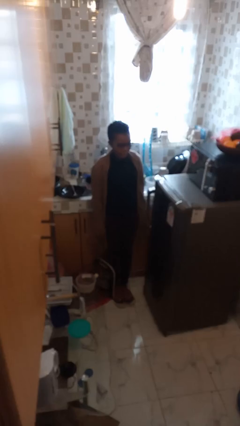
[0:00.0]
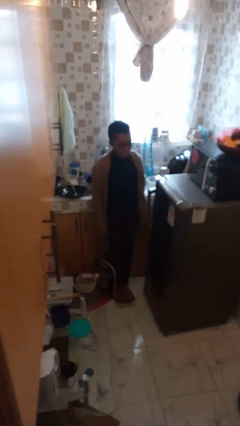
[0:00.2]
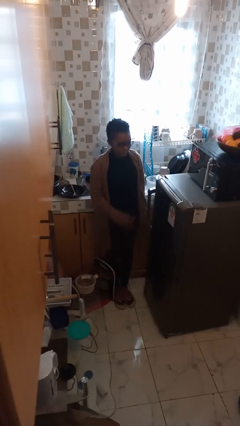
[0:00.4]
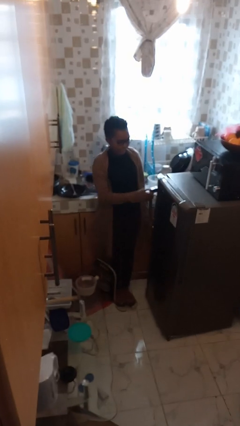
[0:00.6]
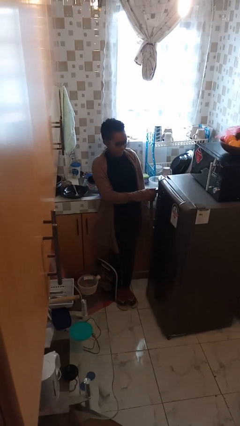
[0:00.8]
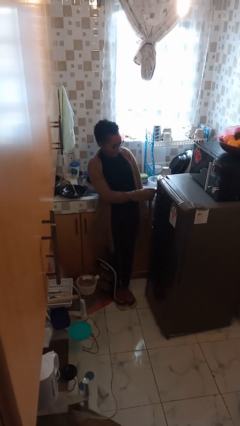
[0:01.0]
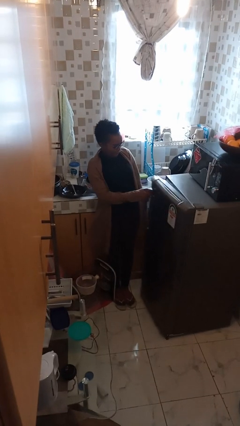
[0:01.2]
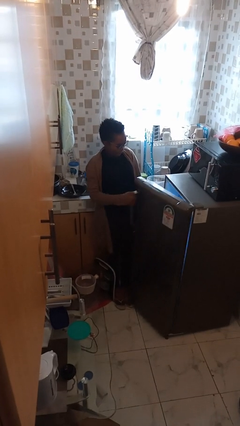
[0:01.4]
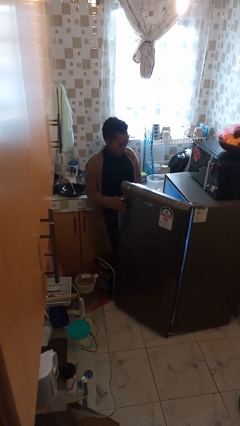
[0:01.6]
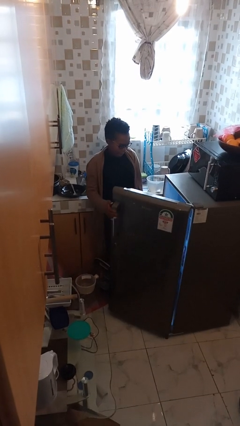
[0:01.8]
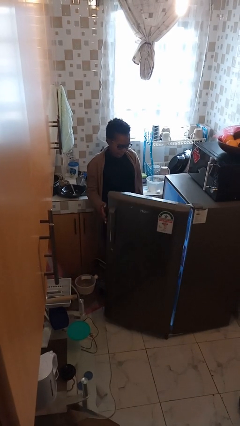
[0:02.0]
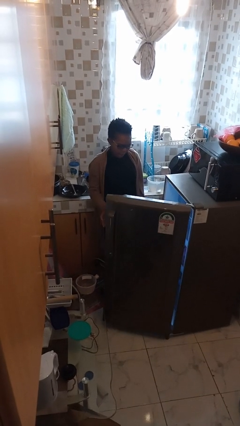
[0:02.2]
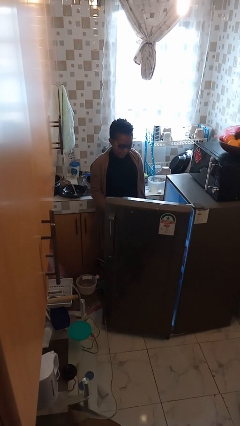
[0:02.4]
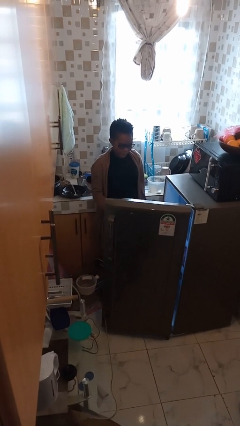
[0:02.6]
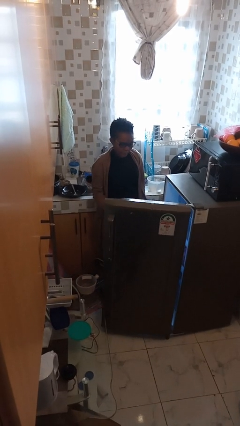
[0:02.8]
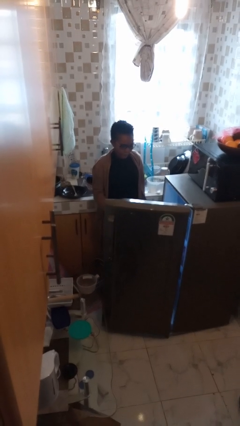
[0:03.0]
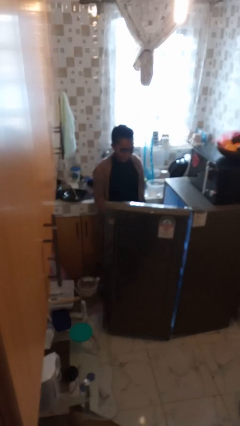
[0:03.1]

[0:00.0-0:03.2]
person opens refrigerator

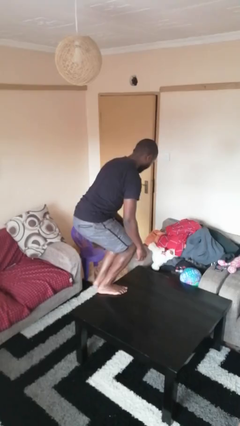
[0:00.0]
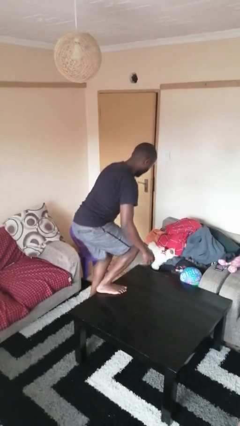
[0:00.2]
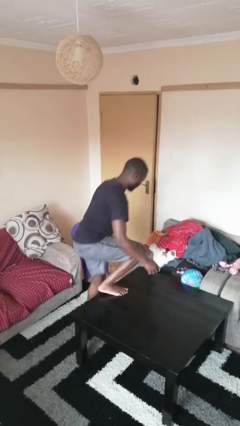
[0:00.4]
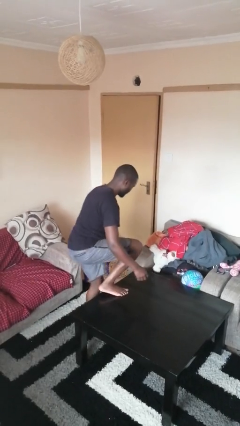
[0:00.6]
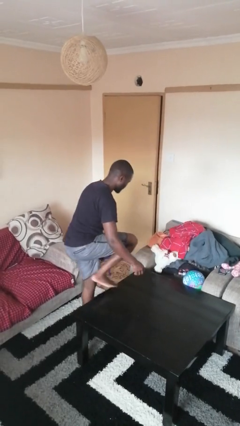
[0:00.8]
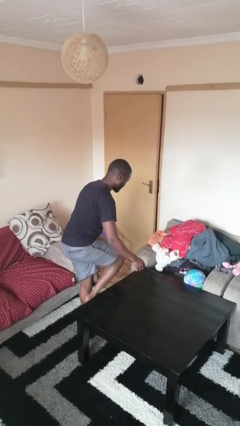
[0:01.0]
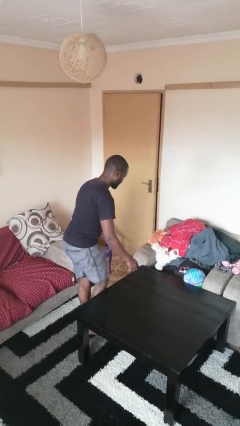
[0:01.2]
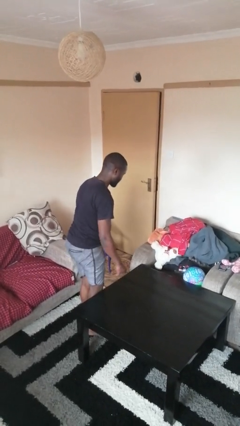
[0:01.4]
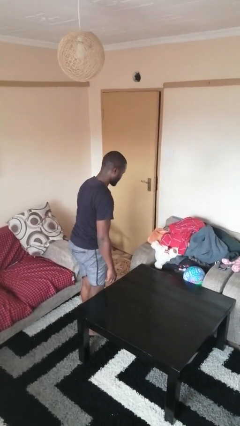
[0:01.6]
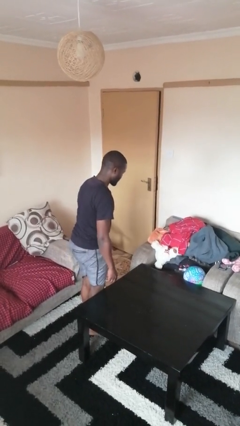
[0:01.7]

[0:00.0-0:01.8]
person climbs off table

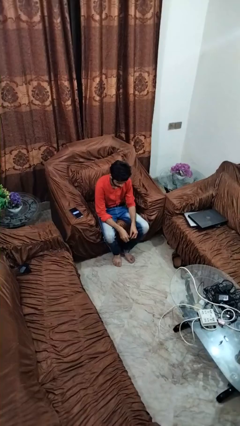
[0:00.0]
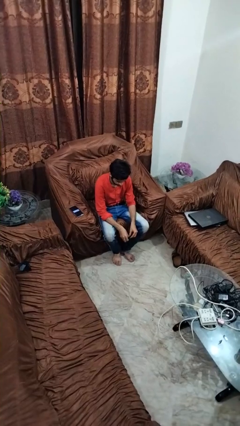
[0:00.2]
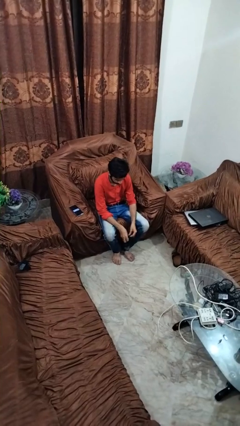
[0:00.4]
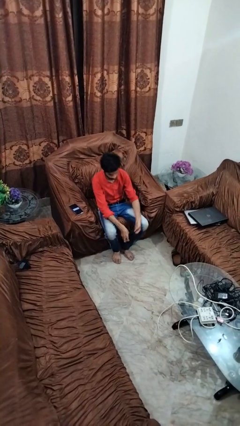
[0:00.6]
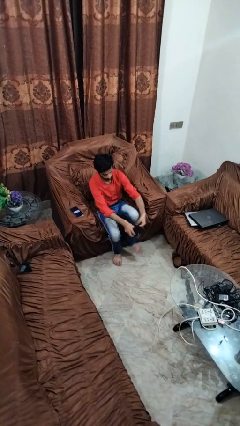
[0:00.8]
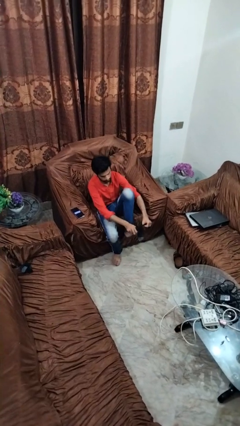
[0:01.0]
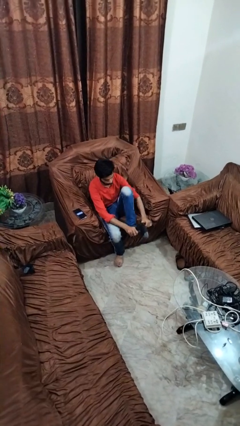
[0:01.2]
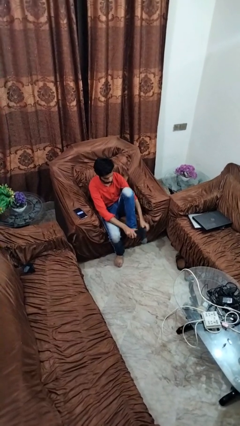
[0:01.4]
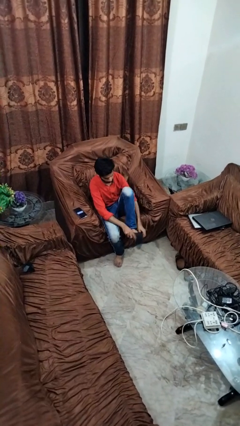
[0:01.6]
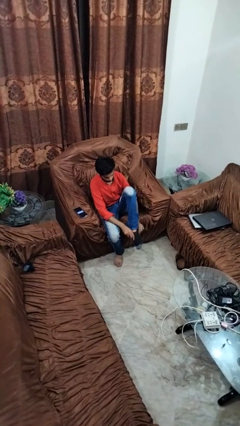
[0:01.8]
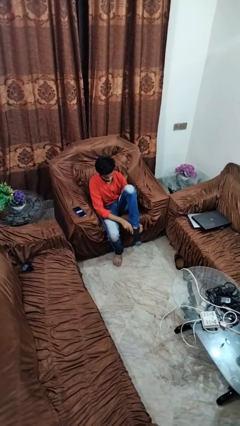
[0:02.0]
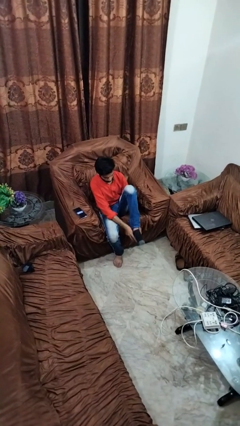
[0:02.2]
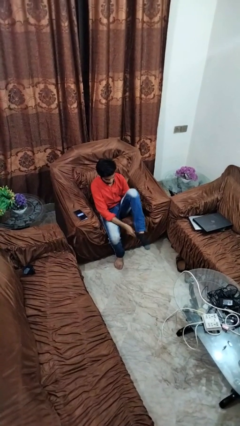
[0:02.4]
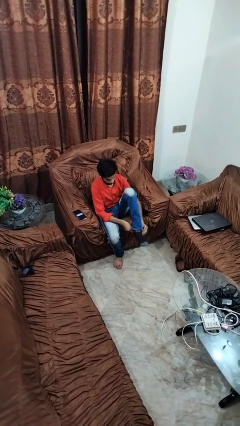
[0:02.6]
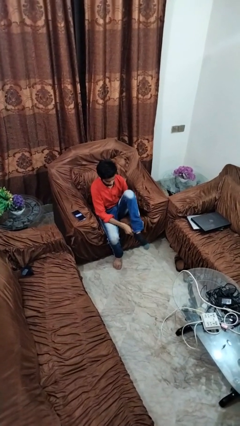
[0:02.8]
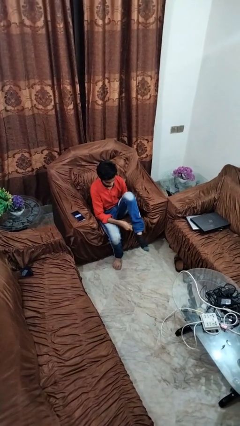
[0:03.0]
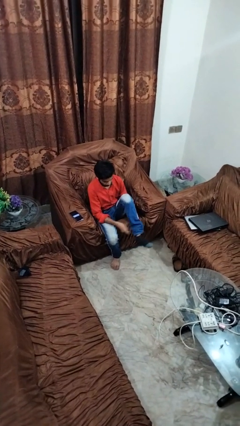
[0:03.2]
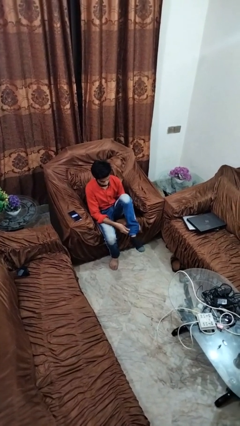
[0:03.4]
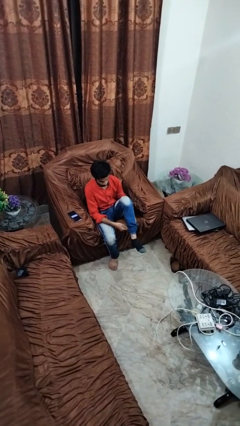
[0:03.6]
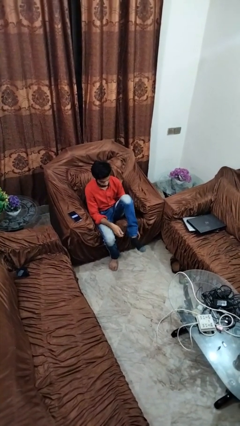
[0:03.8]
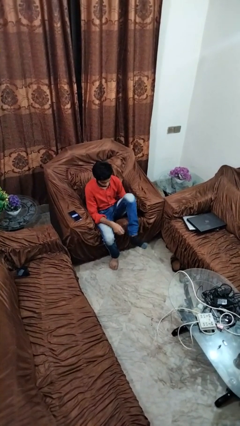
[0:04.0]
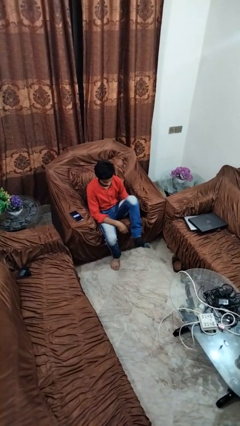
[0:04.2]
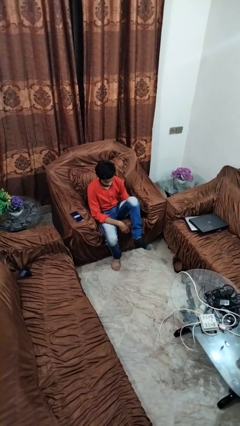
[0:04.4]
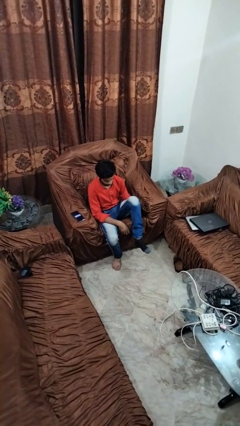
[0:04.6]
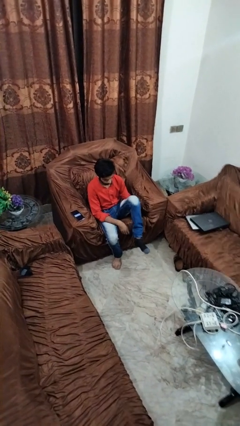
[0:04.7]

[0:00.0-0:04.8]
person puts on socks

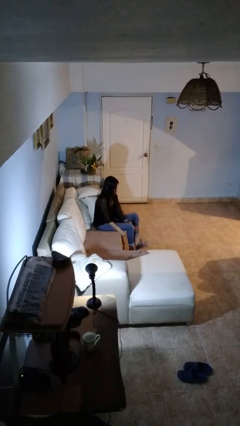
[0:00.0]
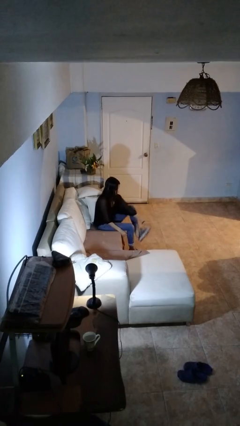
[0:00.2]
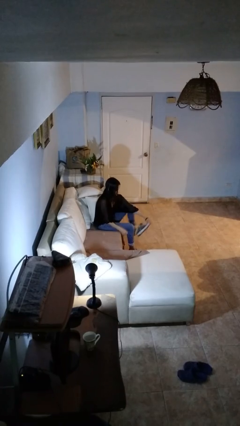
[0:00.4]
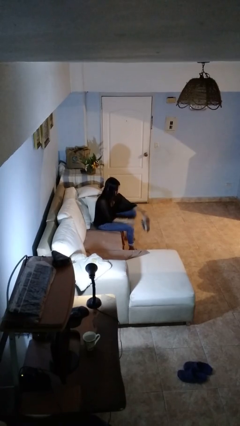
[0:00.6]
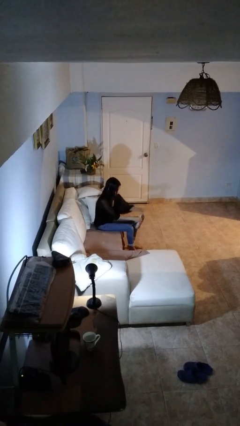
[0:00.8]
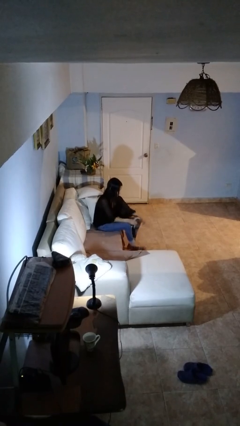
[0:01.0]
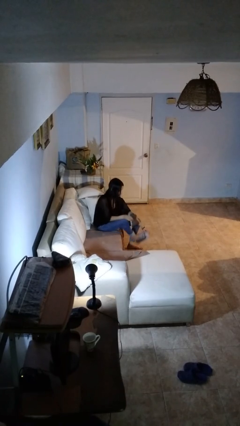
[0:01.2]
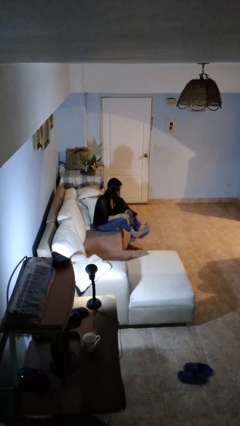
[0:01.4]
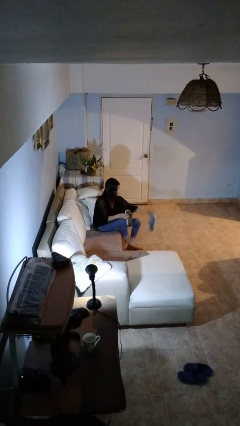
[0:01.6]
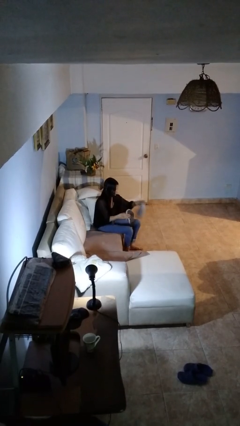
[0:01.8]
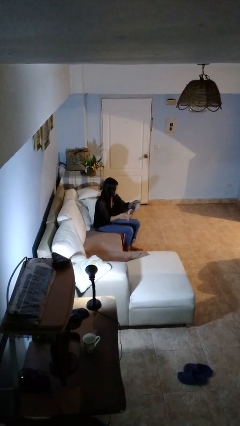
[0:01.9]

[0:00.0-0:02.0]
person takes off shoes

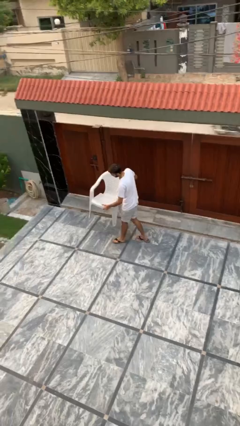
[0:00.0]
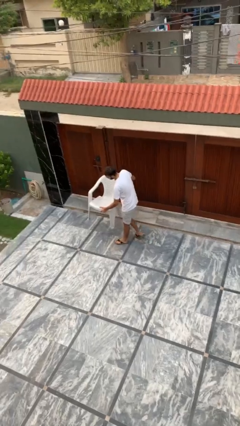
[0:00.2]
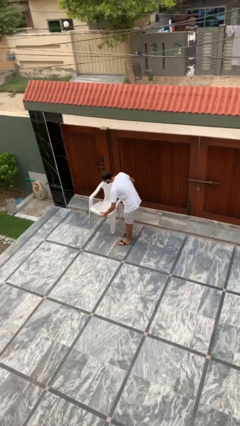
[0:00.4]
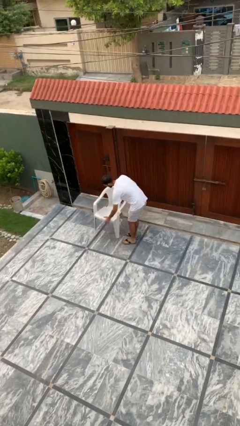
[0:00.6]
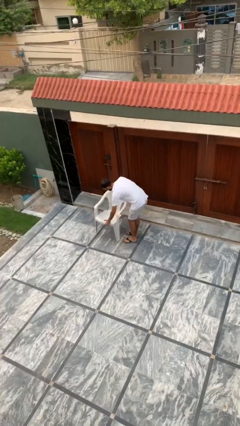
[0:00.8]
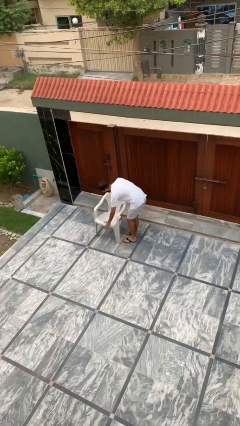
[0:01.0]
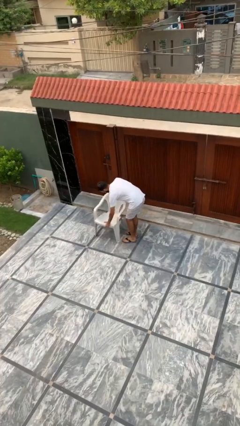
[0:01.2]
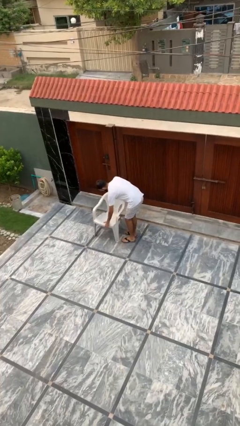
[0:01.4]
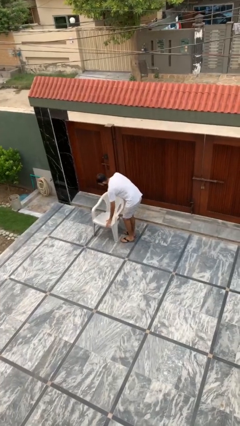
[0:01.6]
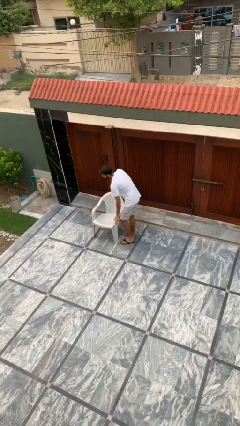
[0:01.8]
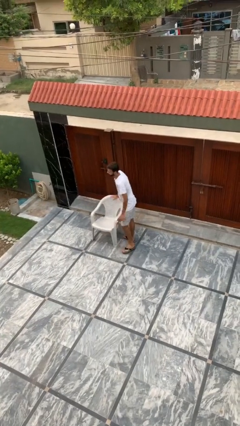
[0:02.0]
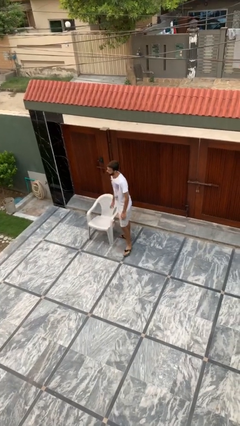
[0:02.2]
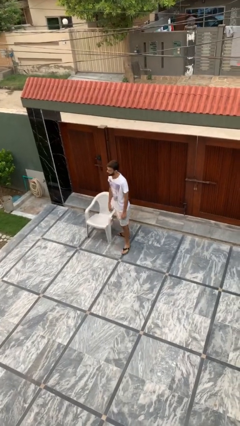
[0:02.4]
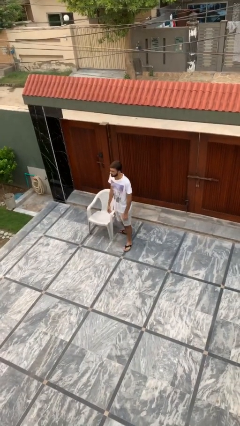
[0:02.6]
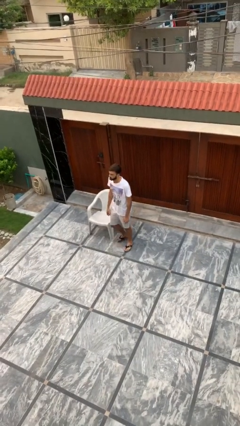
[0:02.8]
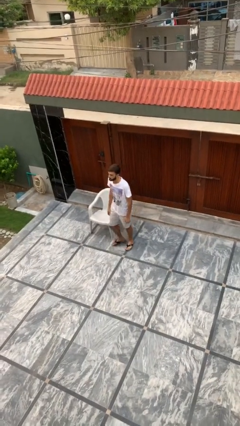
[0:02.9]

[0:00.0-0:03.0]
person puts down object on floor

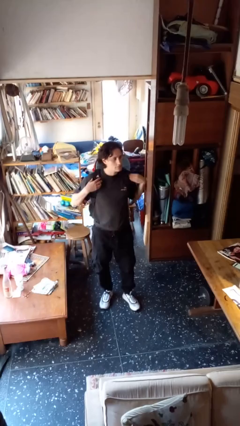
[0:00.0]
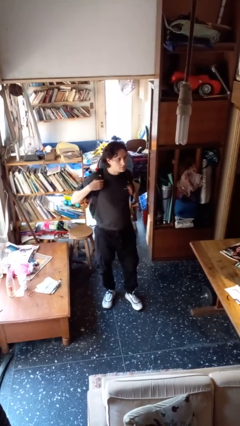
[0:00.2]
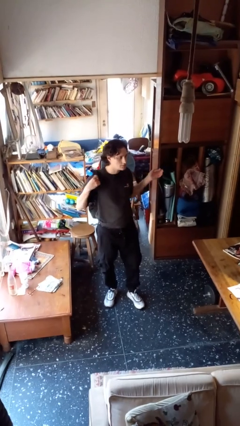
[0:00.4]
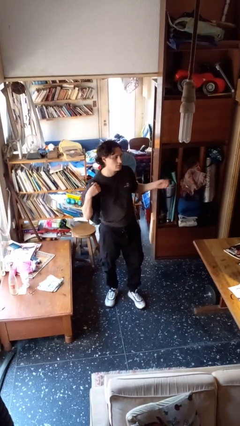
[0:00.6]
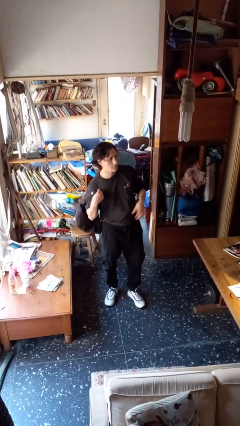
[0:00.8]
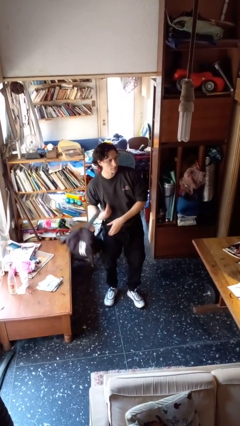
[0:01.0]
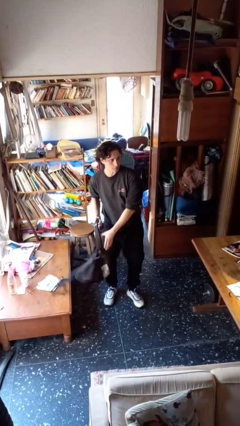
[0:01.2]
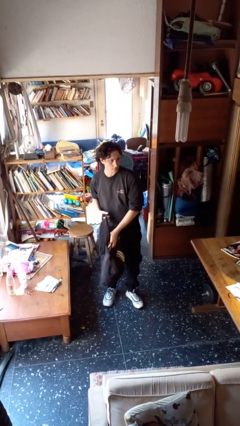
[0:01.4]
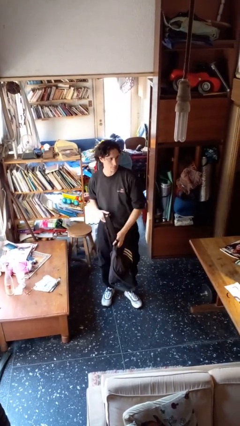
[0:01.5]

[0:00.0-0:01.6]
person takes off backpack

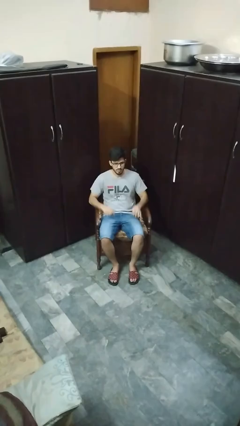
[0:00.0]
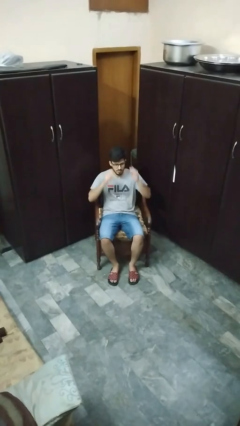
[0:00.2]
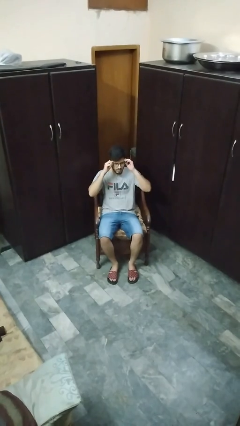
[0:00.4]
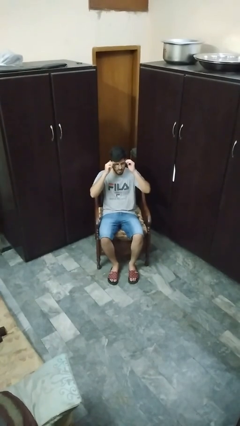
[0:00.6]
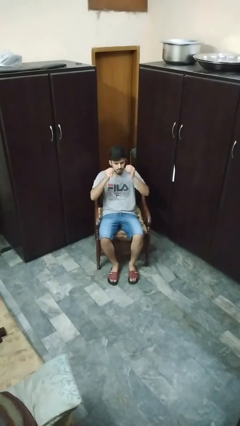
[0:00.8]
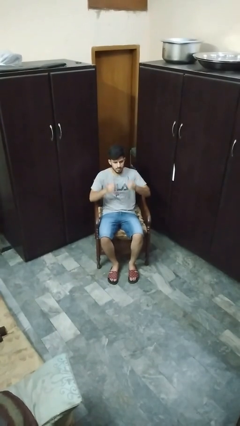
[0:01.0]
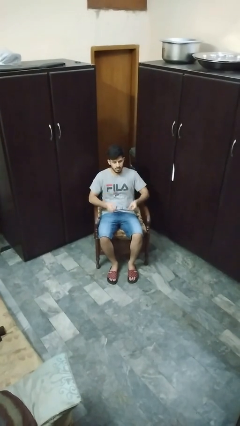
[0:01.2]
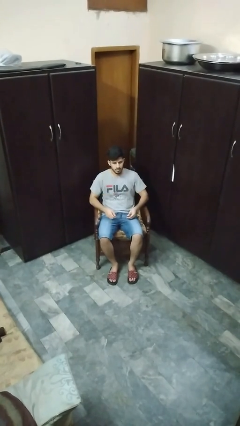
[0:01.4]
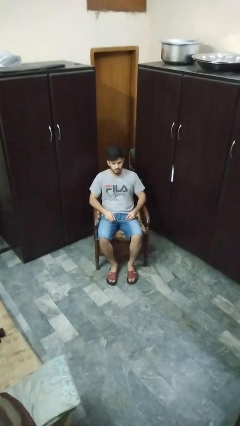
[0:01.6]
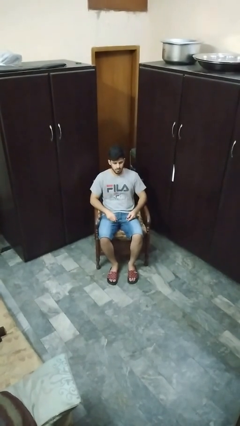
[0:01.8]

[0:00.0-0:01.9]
person takes off glasses
